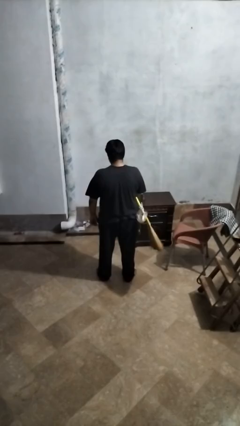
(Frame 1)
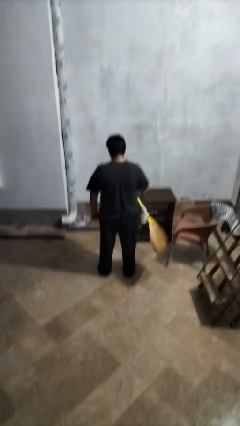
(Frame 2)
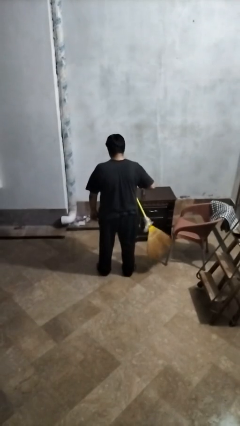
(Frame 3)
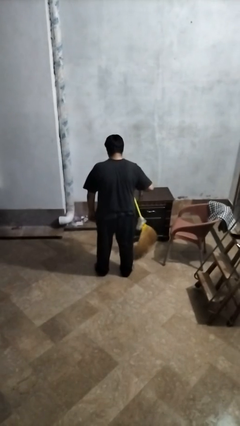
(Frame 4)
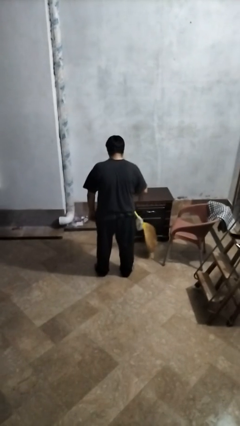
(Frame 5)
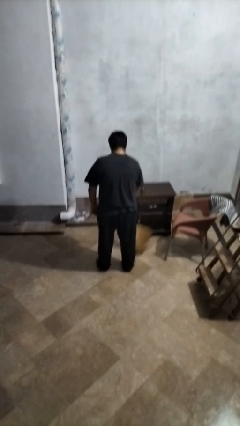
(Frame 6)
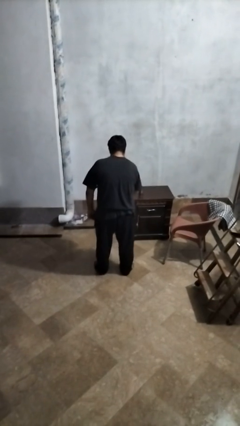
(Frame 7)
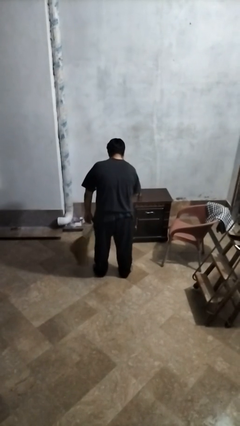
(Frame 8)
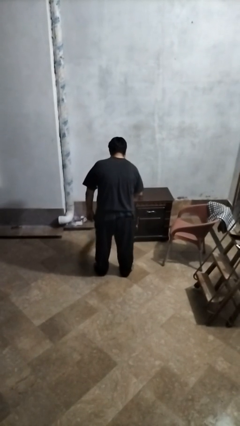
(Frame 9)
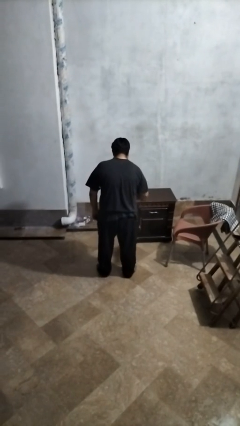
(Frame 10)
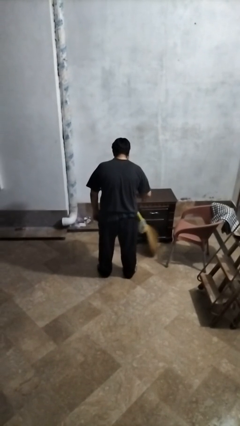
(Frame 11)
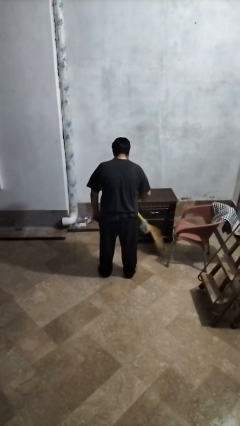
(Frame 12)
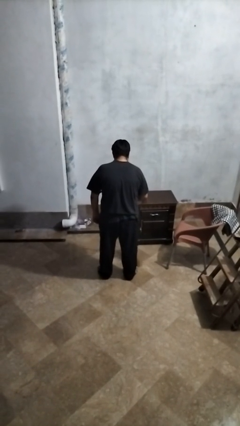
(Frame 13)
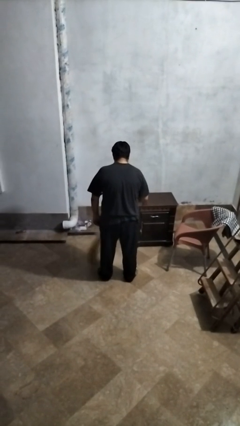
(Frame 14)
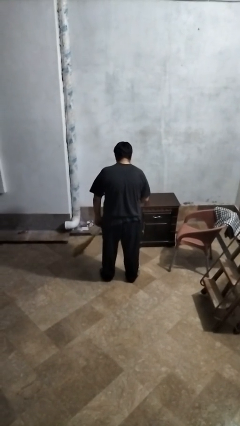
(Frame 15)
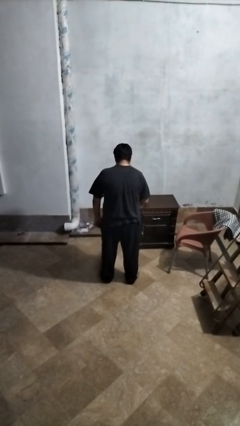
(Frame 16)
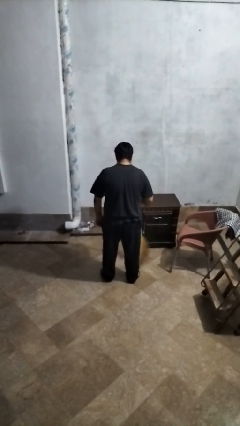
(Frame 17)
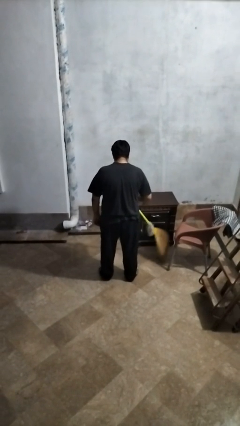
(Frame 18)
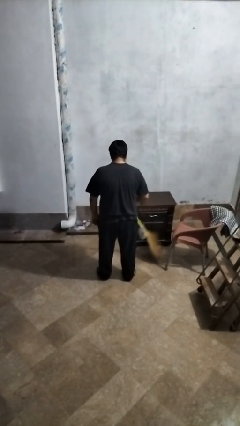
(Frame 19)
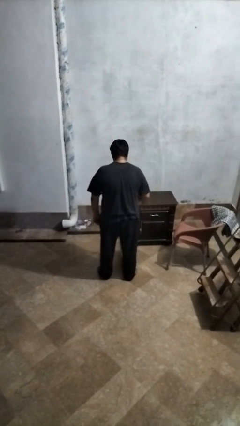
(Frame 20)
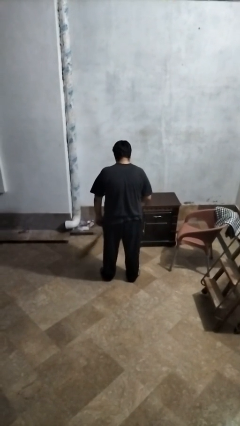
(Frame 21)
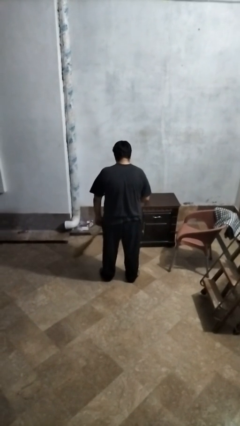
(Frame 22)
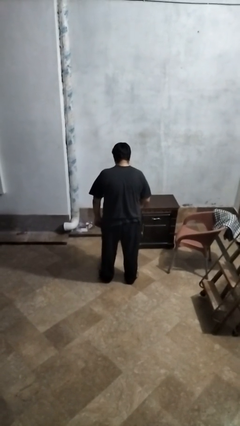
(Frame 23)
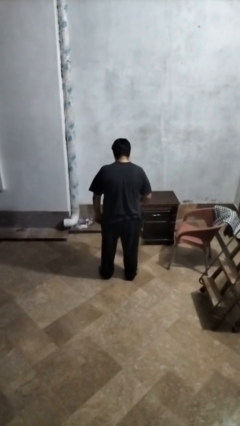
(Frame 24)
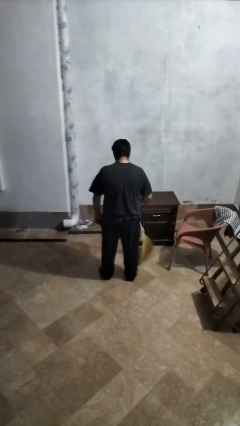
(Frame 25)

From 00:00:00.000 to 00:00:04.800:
person mops

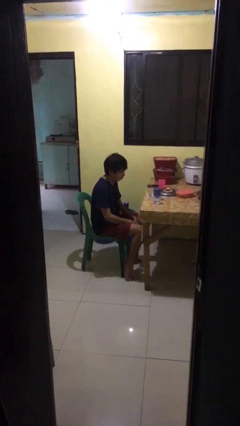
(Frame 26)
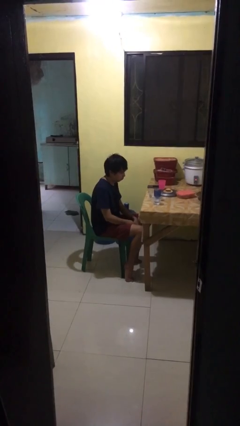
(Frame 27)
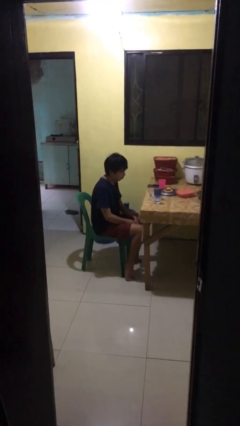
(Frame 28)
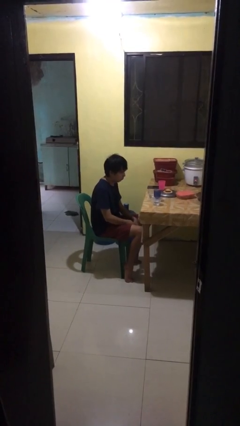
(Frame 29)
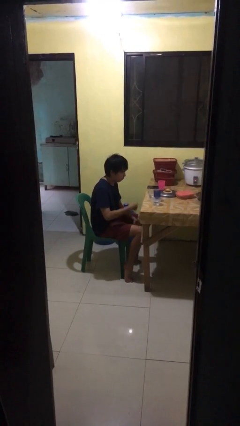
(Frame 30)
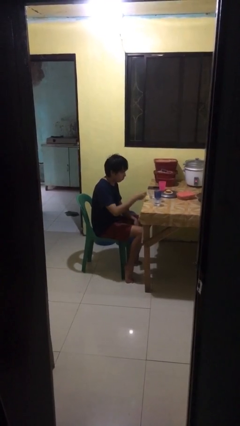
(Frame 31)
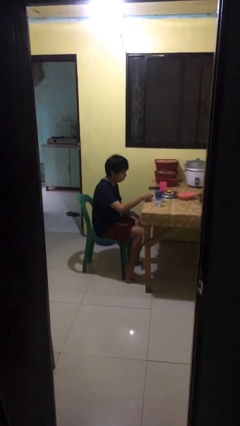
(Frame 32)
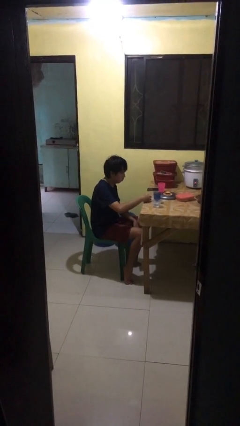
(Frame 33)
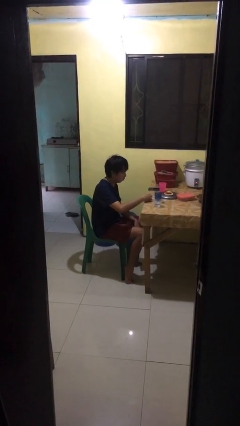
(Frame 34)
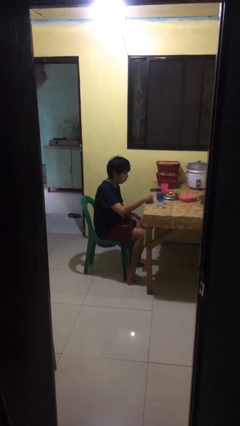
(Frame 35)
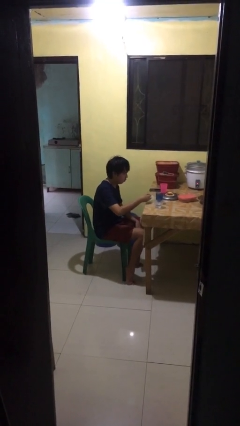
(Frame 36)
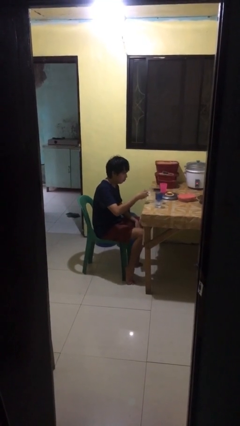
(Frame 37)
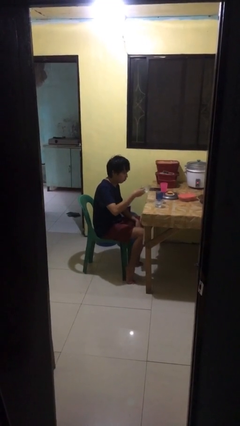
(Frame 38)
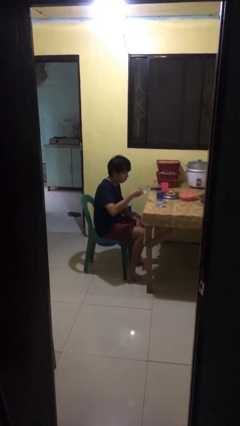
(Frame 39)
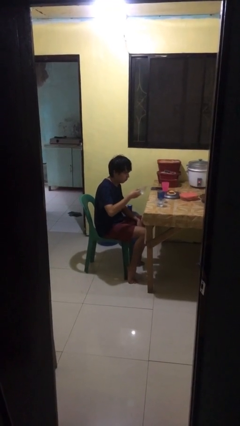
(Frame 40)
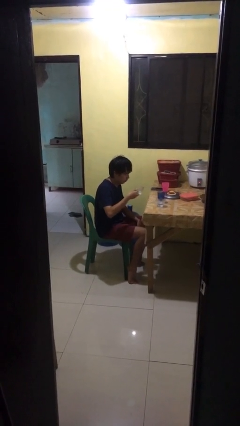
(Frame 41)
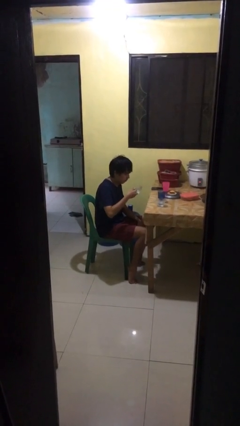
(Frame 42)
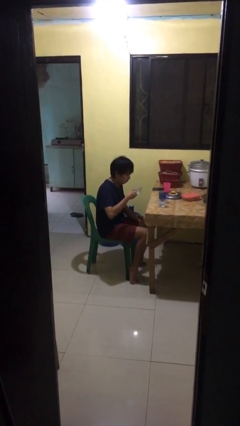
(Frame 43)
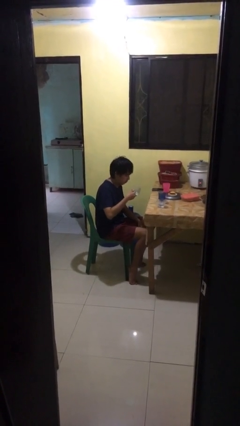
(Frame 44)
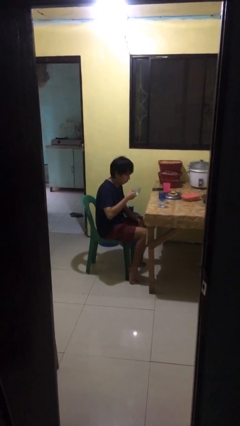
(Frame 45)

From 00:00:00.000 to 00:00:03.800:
person picks up object from table

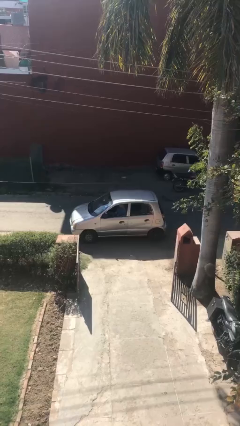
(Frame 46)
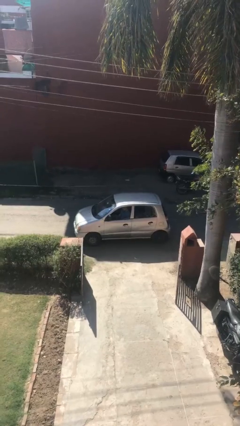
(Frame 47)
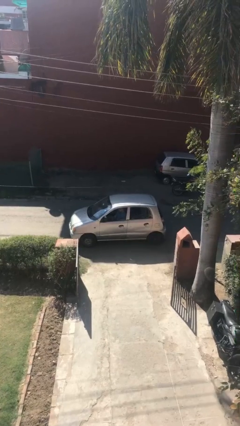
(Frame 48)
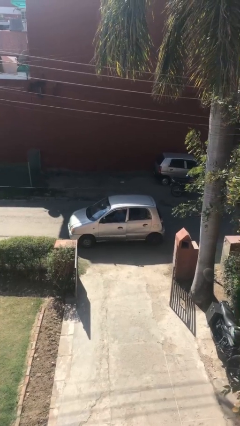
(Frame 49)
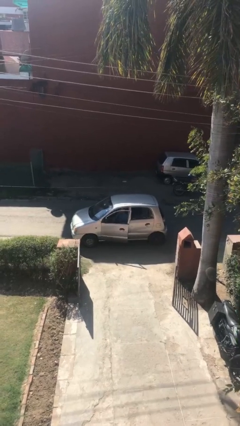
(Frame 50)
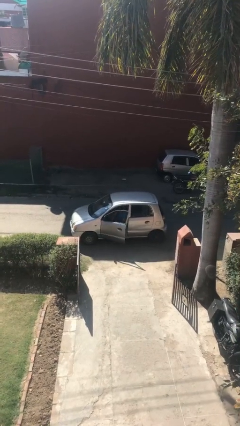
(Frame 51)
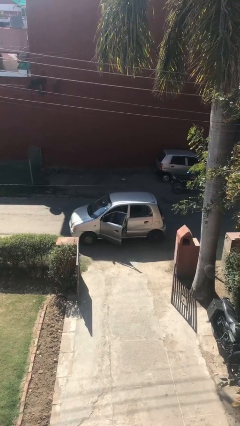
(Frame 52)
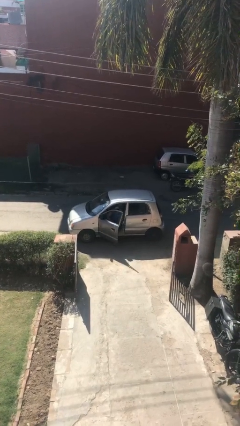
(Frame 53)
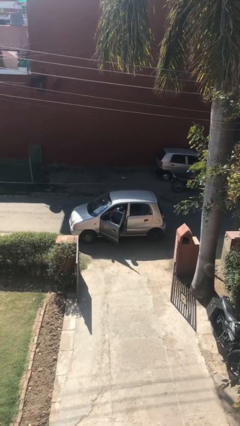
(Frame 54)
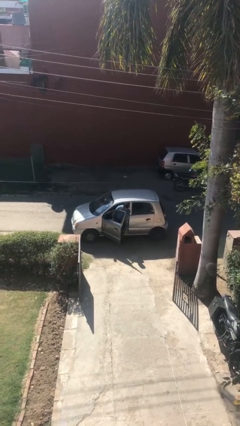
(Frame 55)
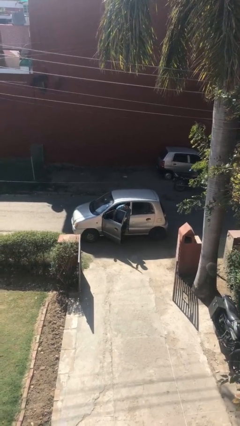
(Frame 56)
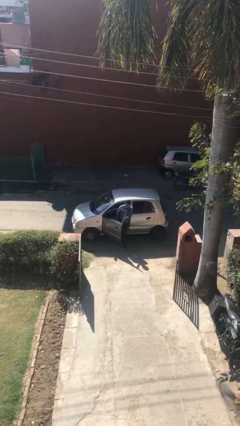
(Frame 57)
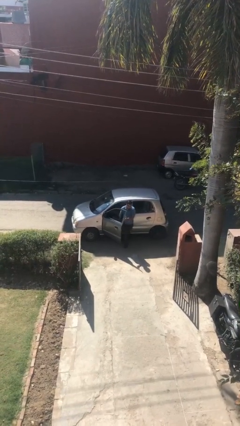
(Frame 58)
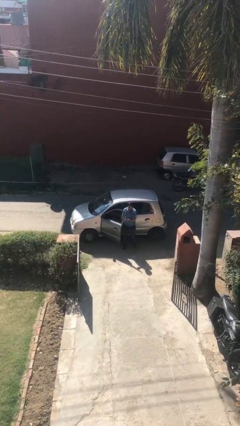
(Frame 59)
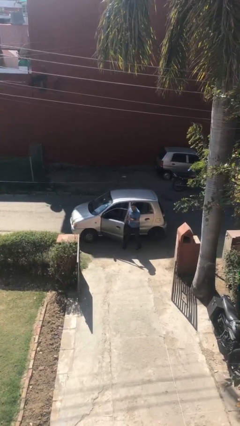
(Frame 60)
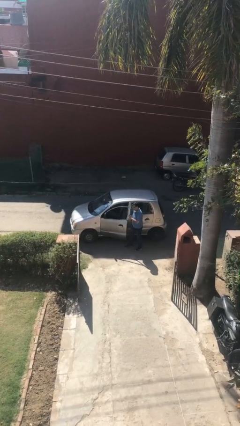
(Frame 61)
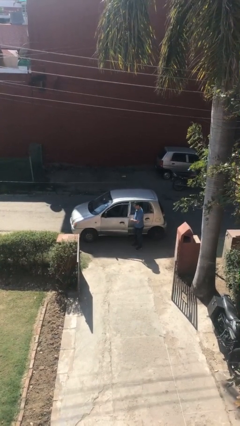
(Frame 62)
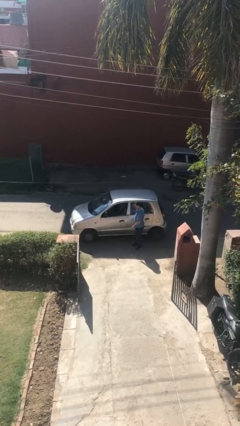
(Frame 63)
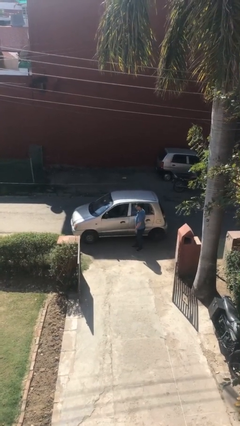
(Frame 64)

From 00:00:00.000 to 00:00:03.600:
car drops off person

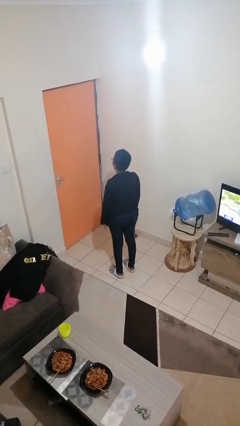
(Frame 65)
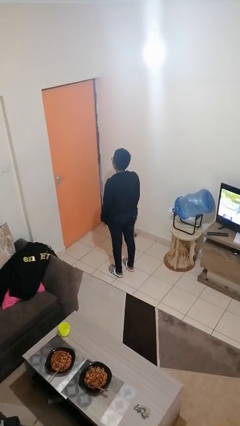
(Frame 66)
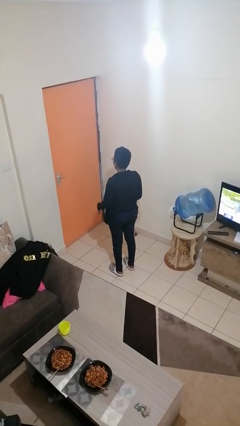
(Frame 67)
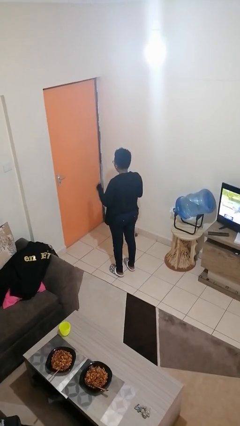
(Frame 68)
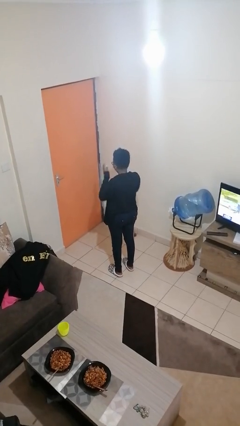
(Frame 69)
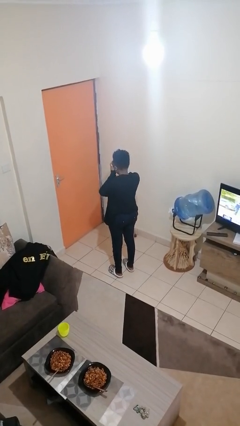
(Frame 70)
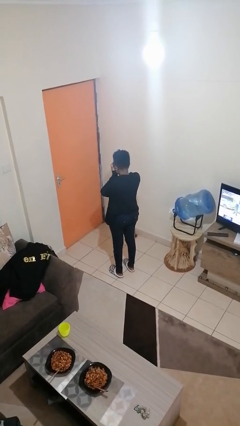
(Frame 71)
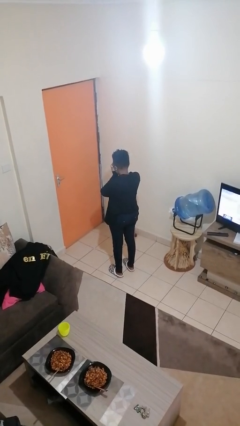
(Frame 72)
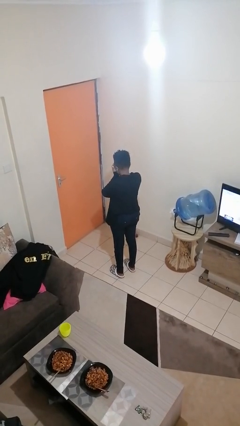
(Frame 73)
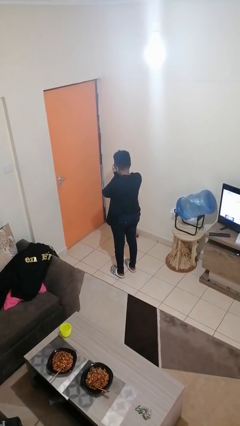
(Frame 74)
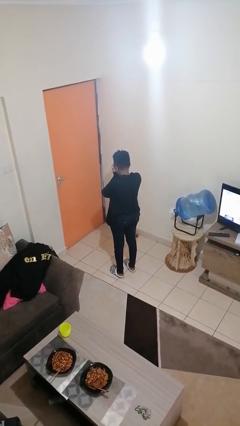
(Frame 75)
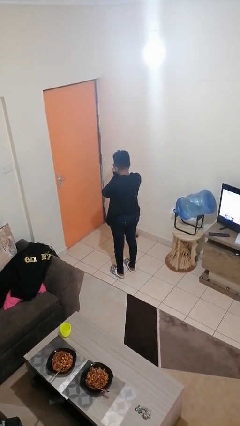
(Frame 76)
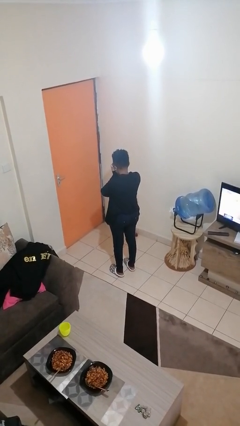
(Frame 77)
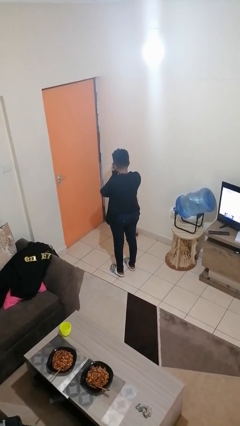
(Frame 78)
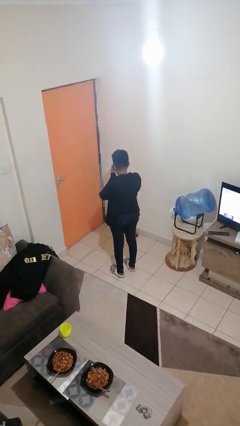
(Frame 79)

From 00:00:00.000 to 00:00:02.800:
person covers face with hands

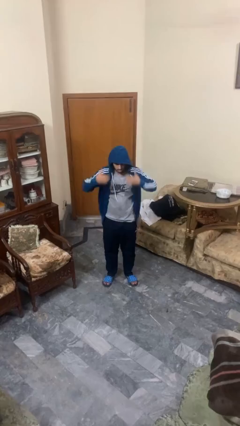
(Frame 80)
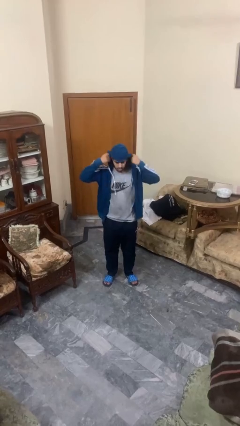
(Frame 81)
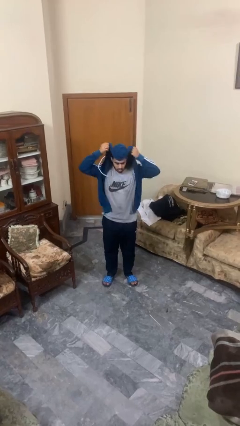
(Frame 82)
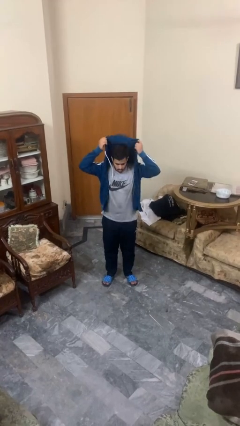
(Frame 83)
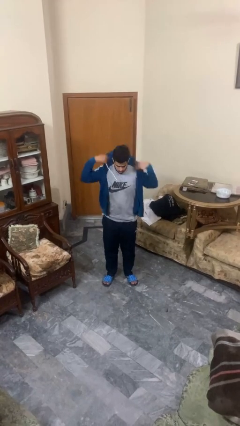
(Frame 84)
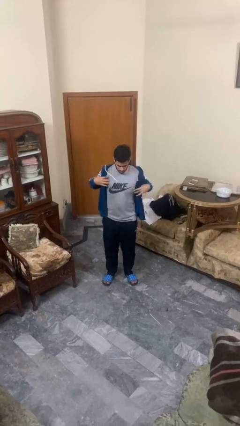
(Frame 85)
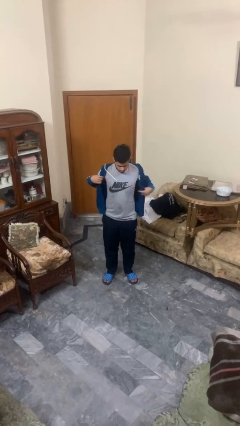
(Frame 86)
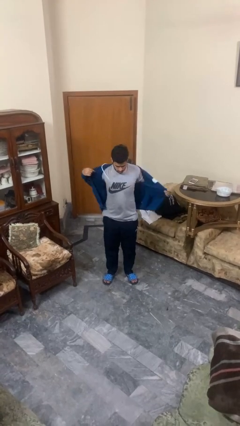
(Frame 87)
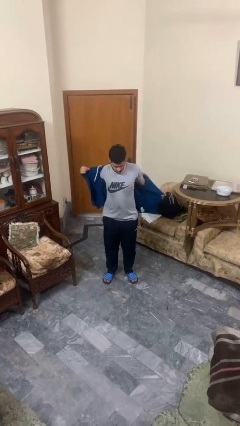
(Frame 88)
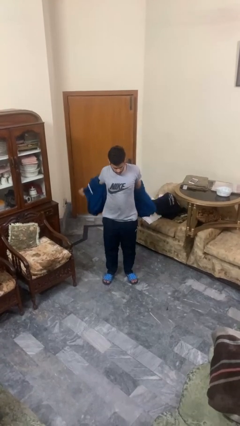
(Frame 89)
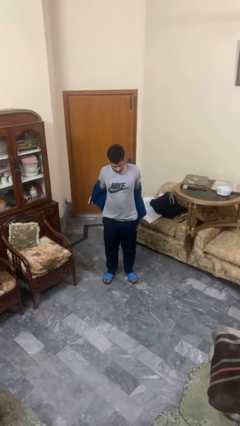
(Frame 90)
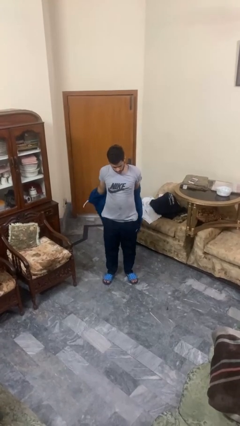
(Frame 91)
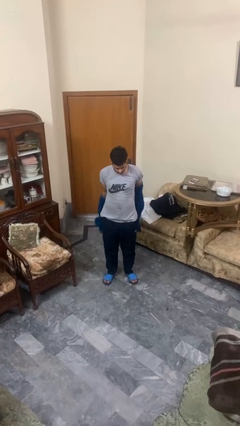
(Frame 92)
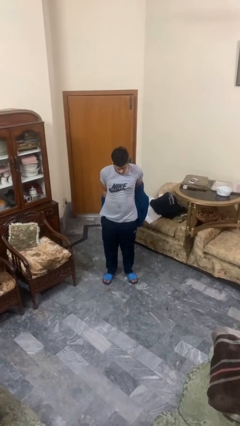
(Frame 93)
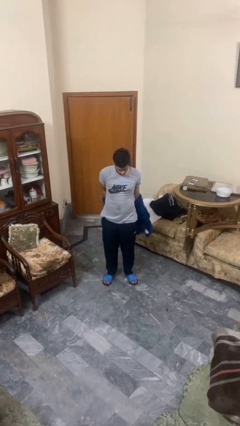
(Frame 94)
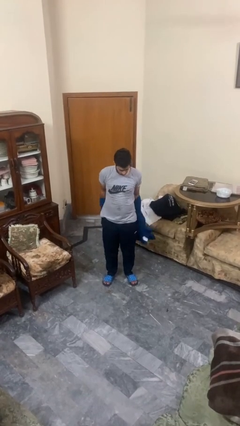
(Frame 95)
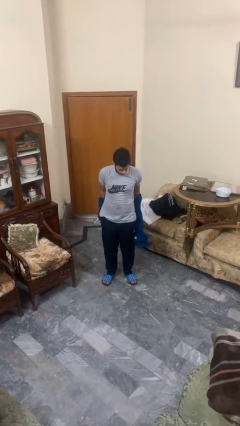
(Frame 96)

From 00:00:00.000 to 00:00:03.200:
person takes off hoodie
